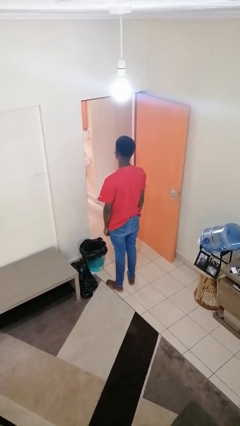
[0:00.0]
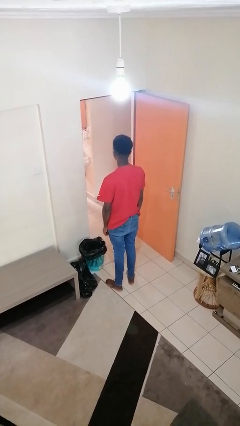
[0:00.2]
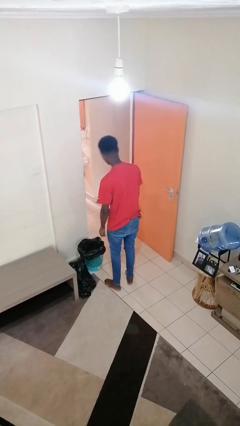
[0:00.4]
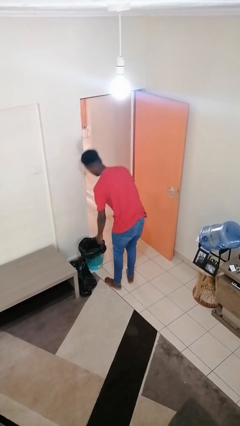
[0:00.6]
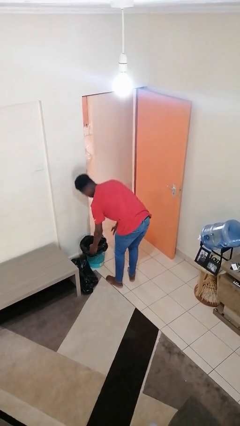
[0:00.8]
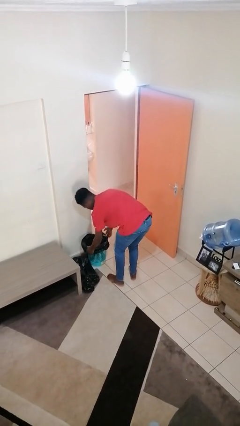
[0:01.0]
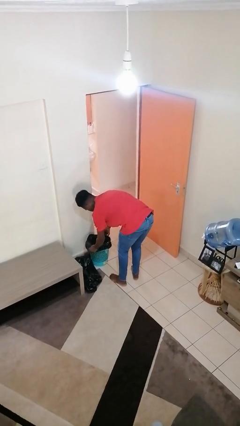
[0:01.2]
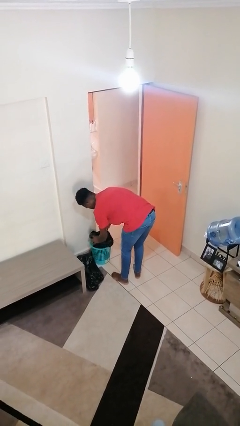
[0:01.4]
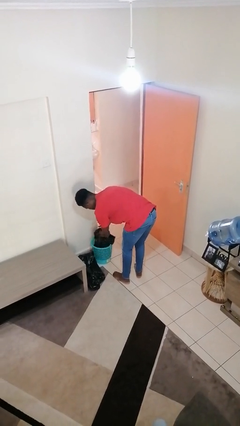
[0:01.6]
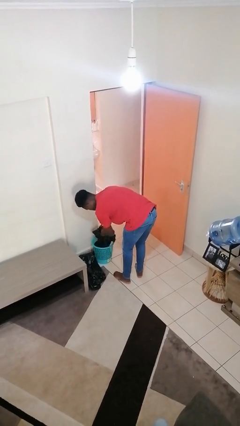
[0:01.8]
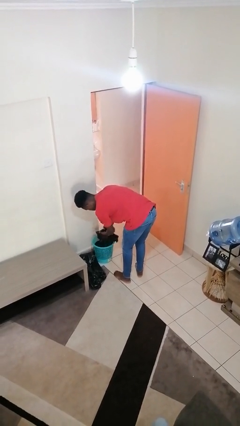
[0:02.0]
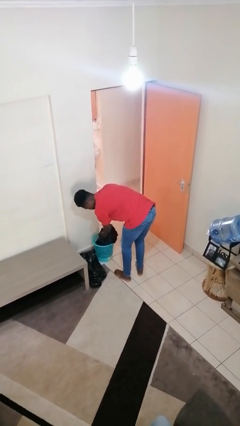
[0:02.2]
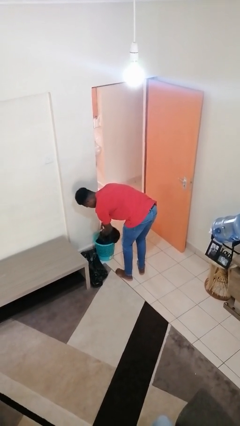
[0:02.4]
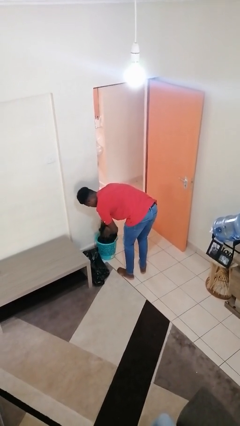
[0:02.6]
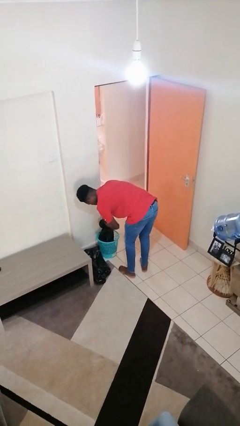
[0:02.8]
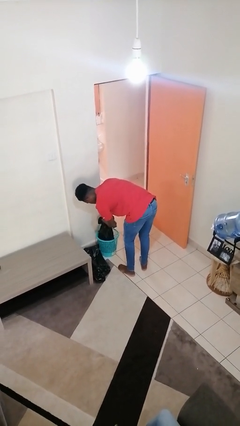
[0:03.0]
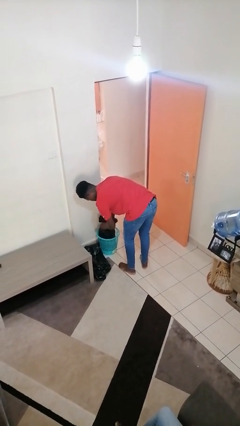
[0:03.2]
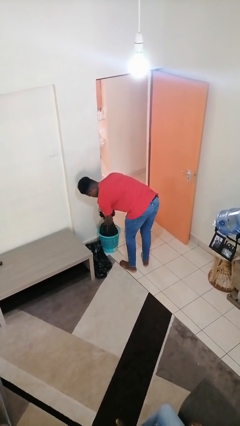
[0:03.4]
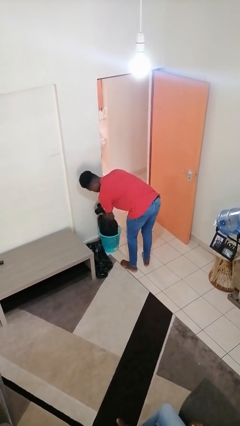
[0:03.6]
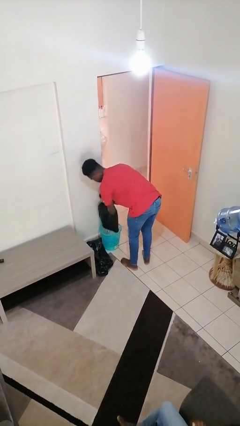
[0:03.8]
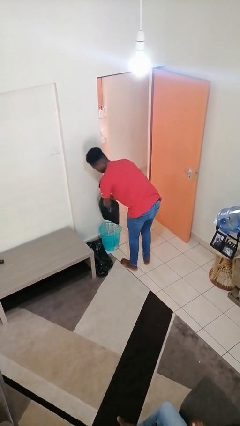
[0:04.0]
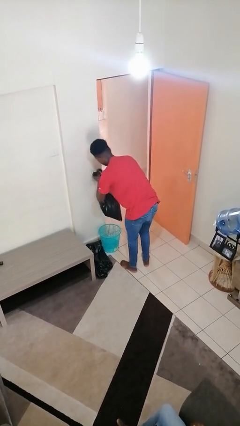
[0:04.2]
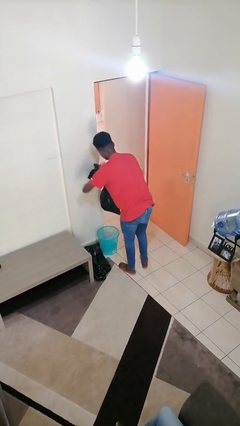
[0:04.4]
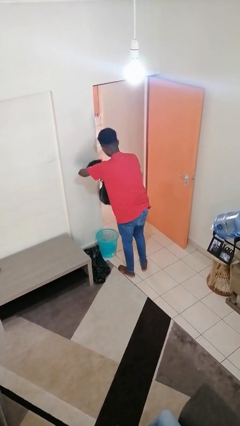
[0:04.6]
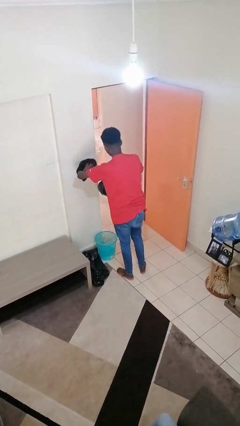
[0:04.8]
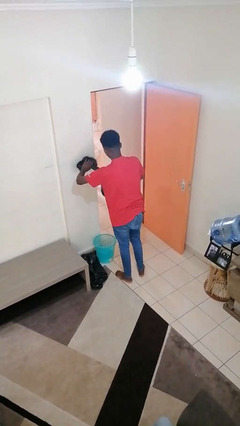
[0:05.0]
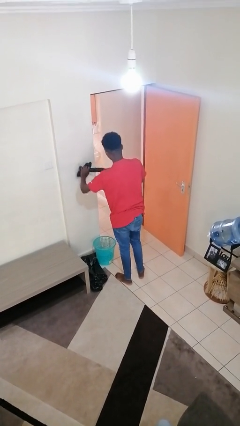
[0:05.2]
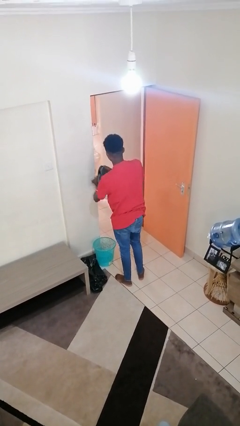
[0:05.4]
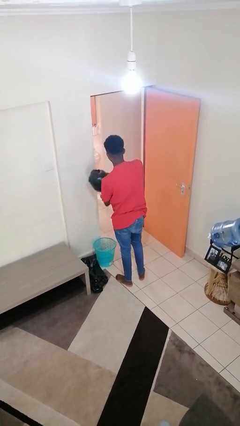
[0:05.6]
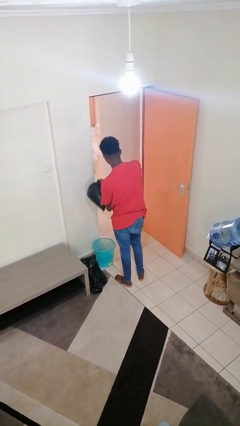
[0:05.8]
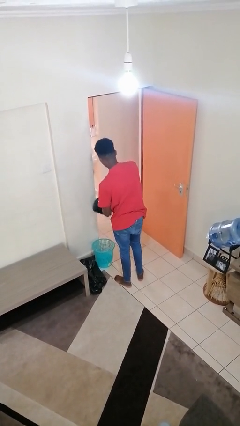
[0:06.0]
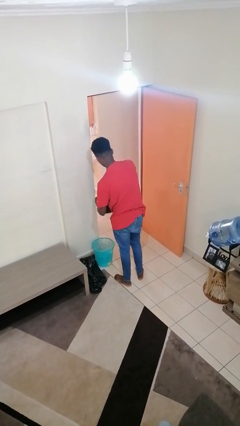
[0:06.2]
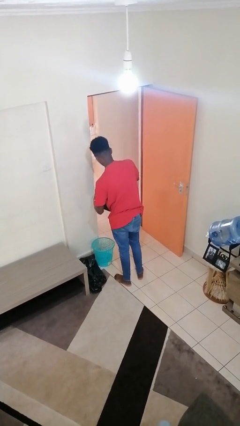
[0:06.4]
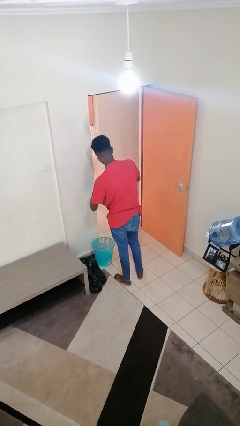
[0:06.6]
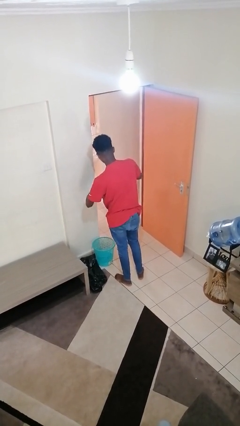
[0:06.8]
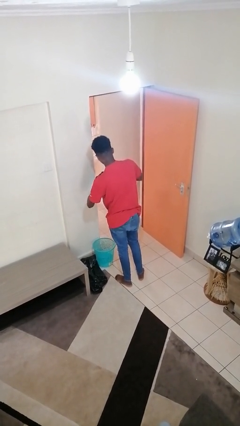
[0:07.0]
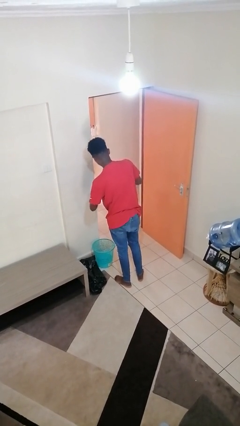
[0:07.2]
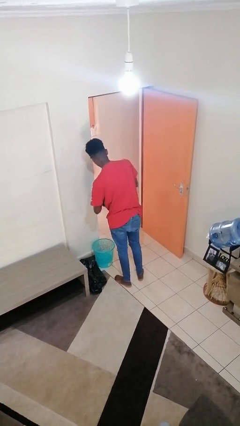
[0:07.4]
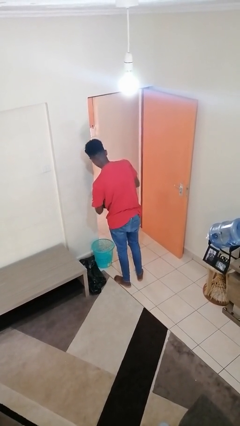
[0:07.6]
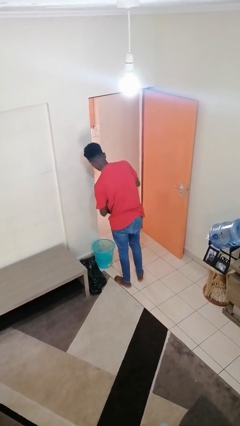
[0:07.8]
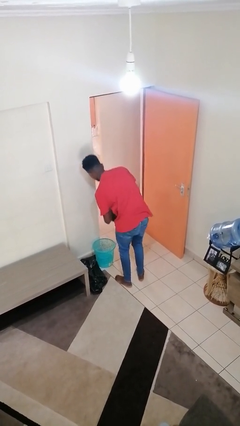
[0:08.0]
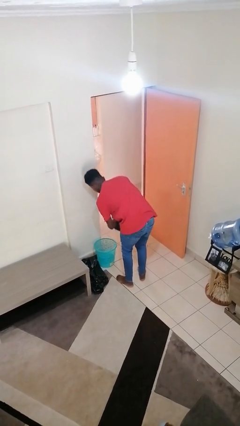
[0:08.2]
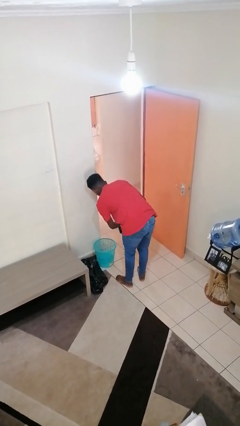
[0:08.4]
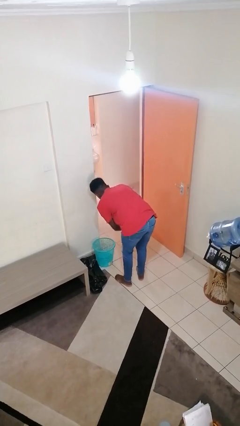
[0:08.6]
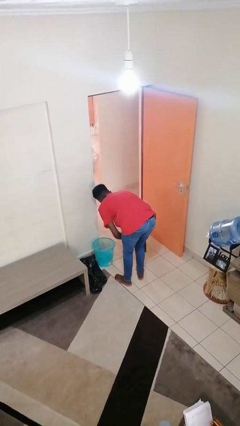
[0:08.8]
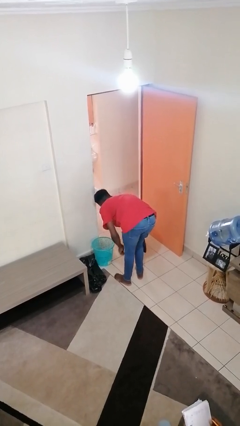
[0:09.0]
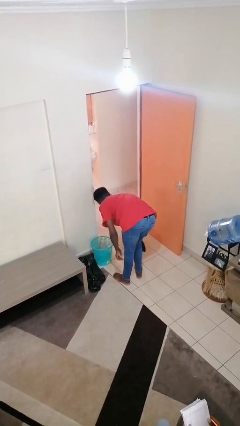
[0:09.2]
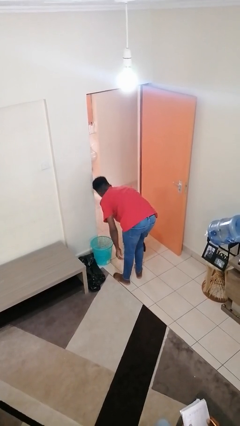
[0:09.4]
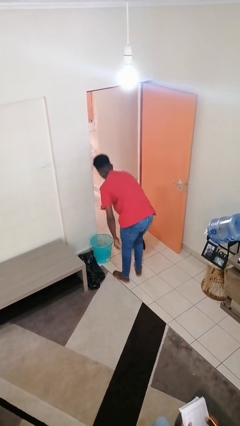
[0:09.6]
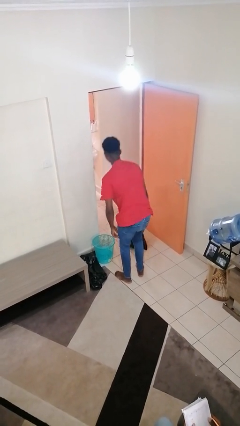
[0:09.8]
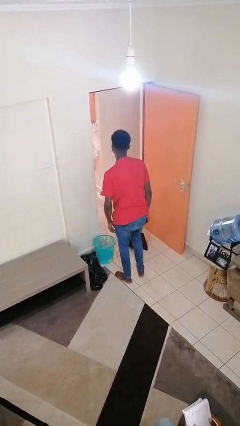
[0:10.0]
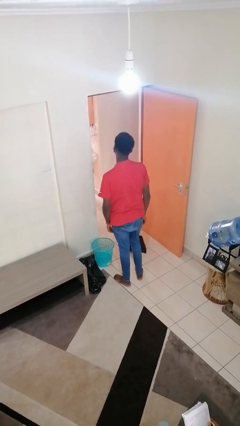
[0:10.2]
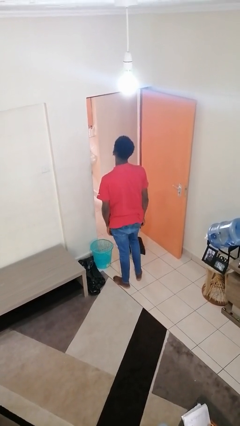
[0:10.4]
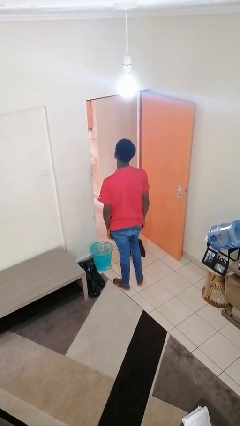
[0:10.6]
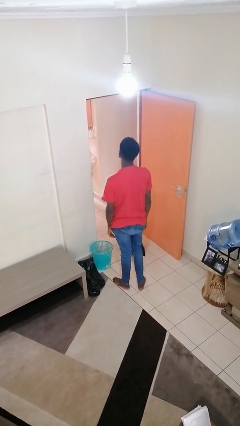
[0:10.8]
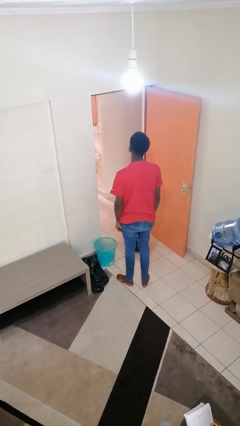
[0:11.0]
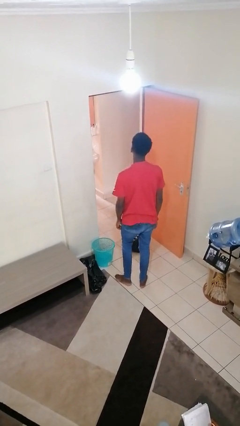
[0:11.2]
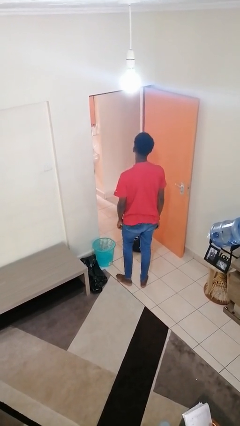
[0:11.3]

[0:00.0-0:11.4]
person removes trashbag from trashcan

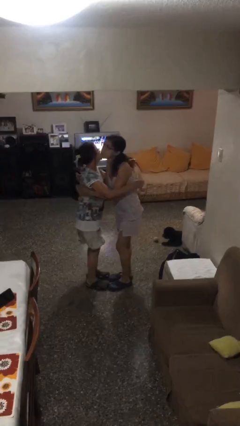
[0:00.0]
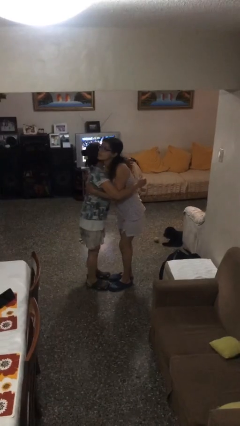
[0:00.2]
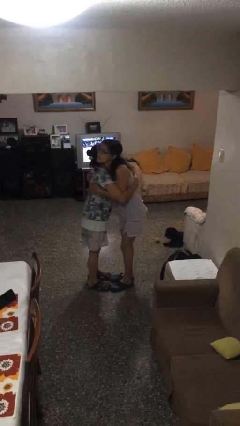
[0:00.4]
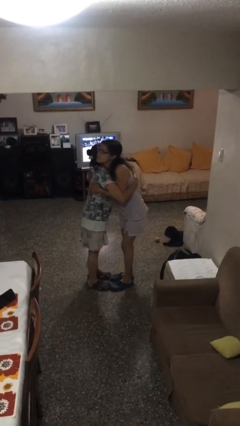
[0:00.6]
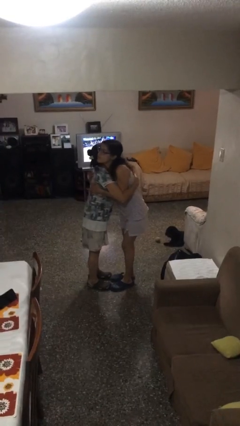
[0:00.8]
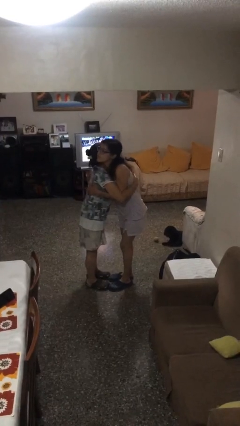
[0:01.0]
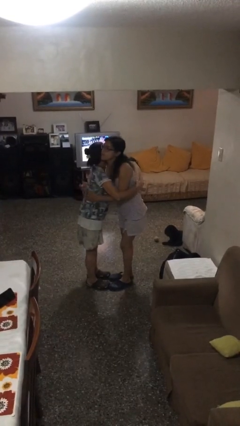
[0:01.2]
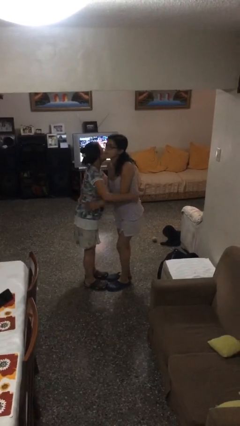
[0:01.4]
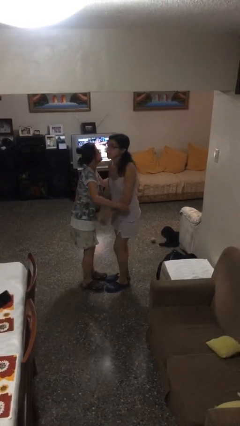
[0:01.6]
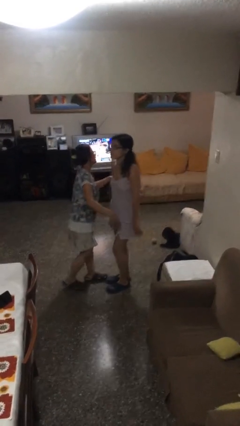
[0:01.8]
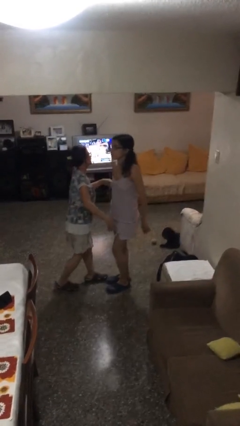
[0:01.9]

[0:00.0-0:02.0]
person embraces person

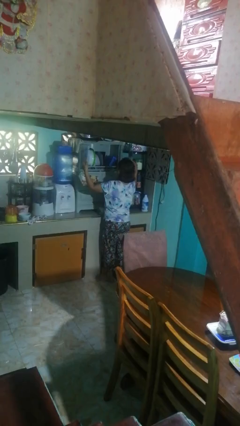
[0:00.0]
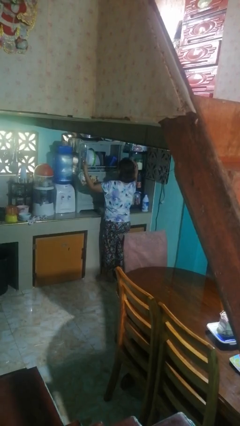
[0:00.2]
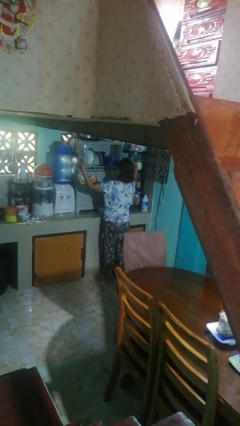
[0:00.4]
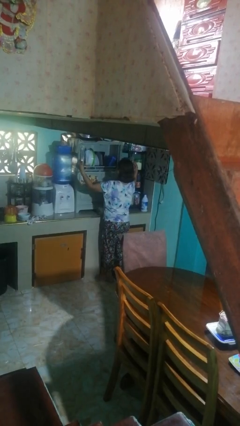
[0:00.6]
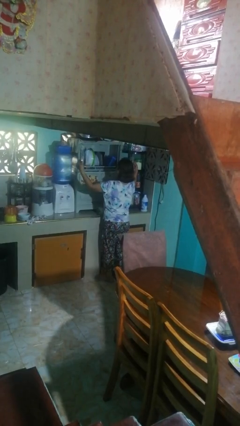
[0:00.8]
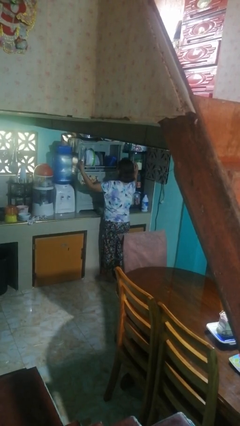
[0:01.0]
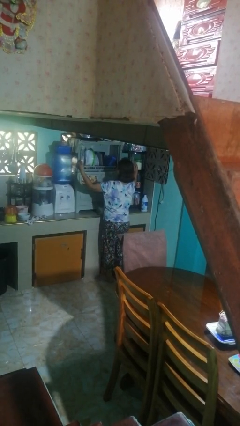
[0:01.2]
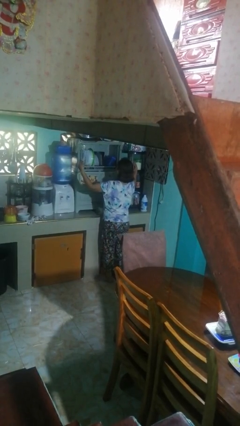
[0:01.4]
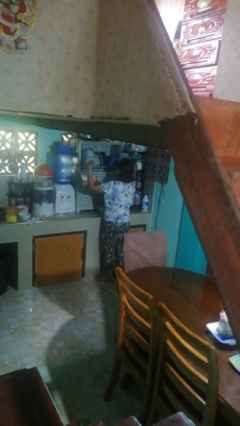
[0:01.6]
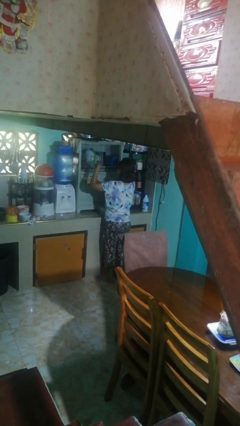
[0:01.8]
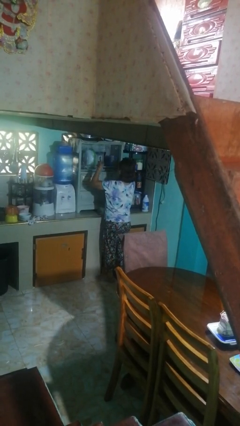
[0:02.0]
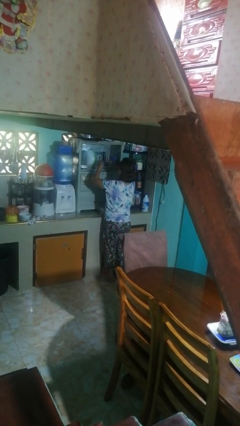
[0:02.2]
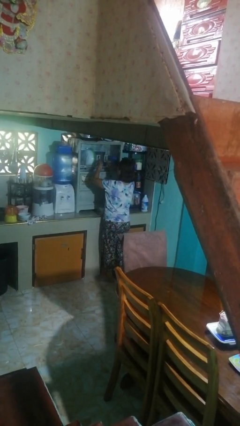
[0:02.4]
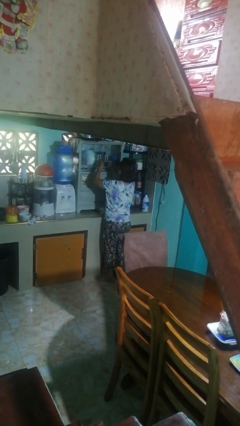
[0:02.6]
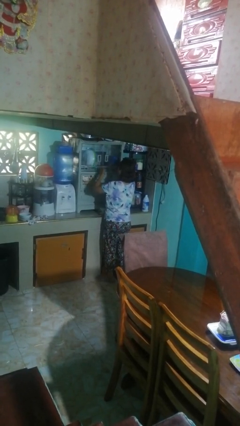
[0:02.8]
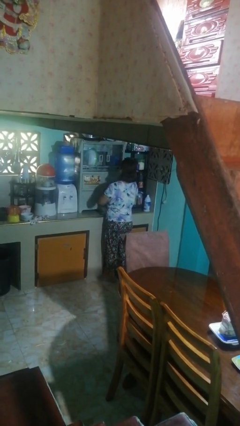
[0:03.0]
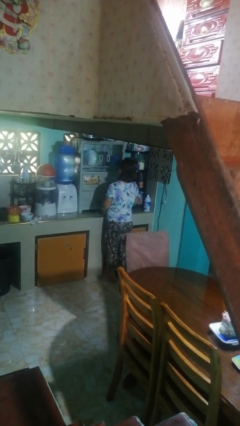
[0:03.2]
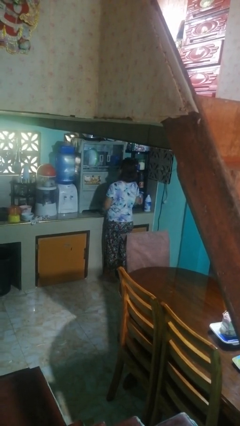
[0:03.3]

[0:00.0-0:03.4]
person opens curtains

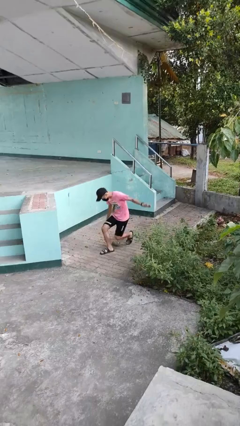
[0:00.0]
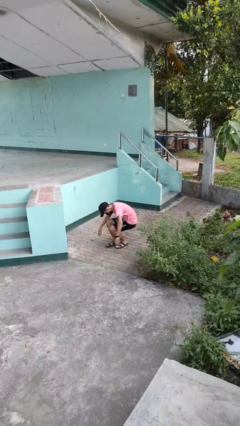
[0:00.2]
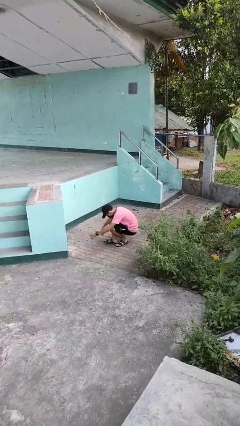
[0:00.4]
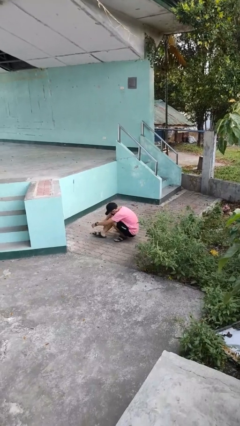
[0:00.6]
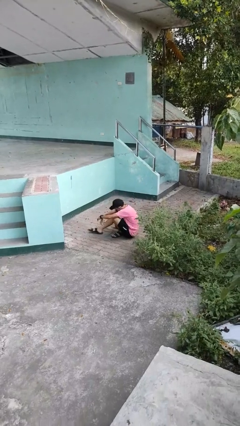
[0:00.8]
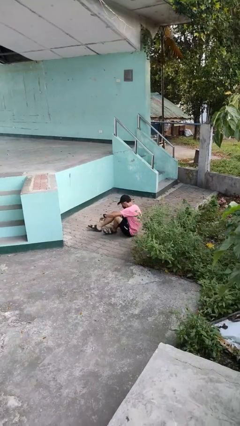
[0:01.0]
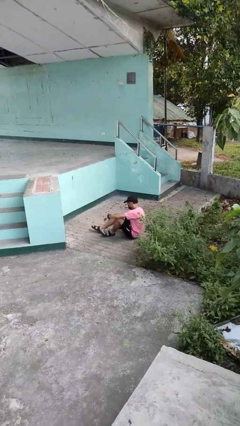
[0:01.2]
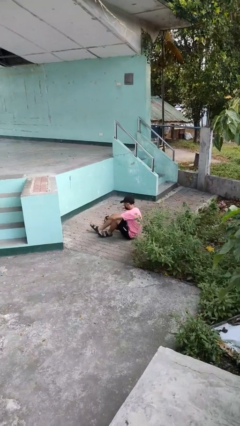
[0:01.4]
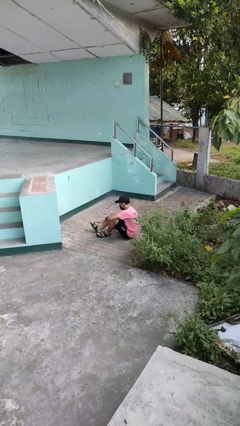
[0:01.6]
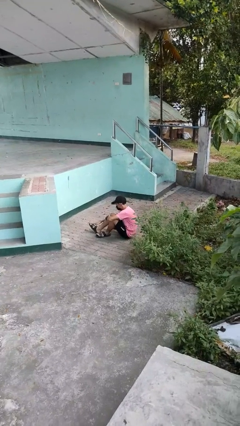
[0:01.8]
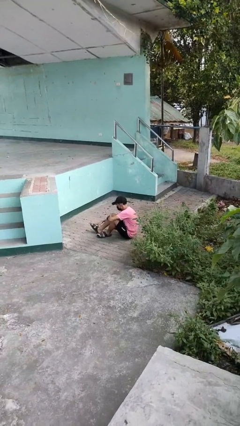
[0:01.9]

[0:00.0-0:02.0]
person lies down on floor
